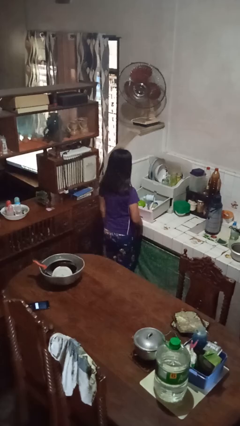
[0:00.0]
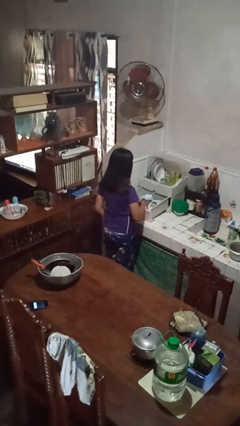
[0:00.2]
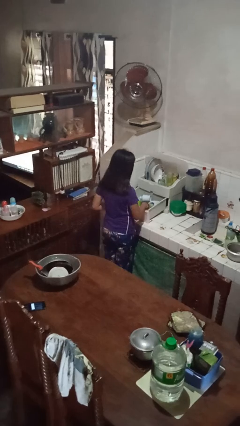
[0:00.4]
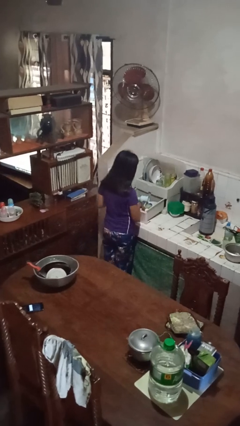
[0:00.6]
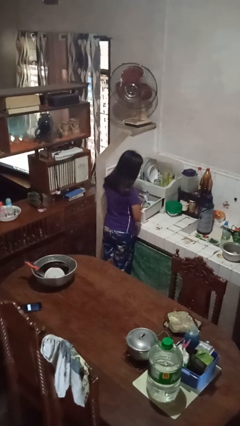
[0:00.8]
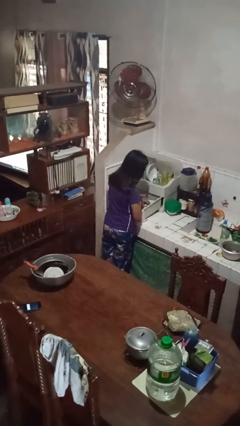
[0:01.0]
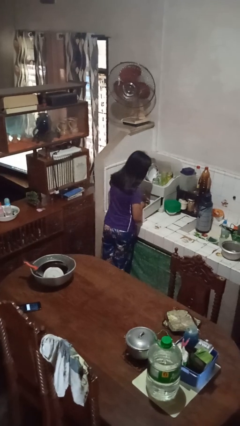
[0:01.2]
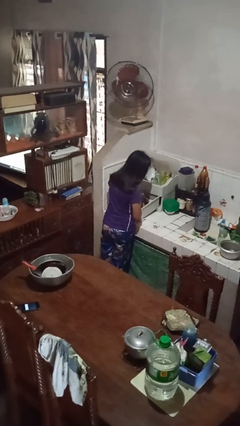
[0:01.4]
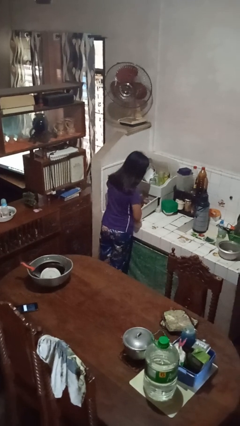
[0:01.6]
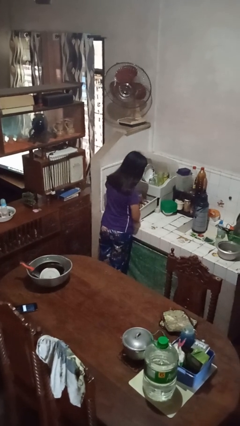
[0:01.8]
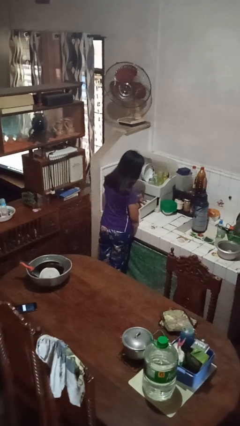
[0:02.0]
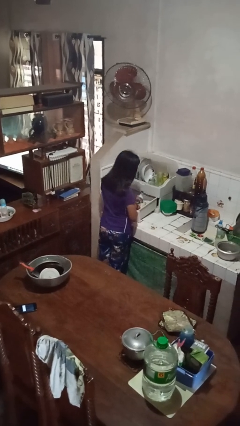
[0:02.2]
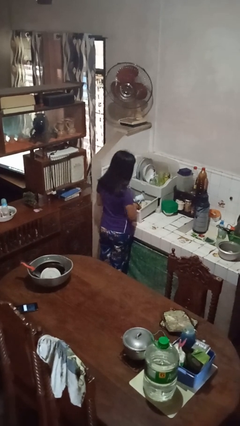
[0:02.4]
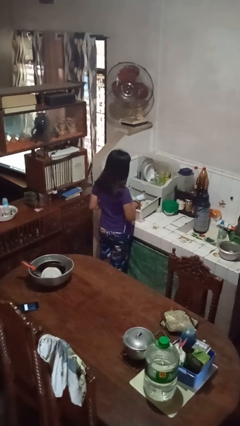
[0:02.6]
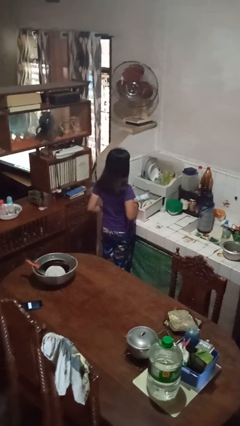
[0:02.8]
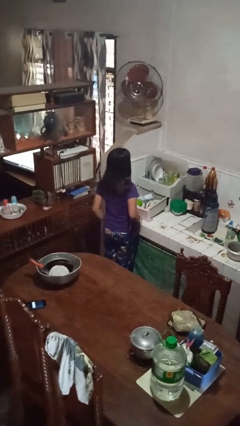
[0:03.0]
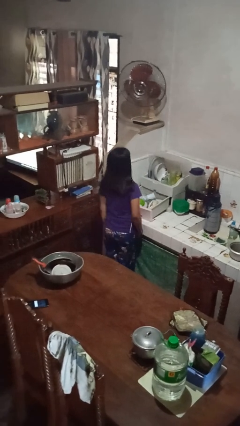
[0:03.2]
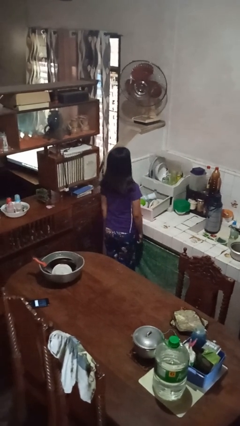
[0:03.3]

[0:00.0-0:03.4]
person searches in kitchen drawer

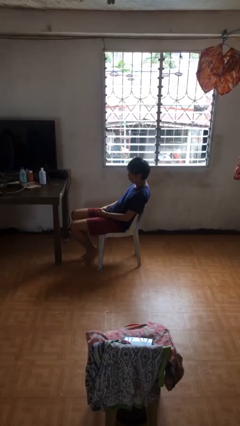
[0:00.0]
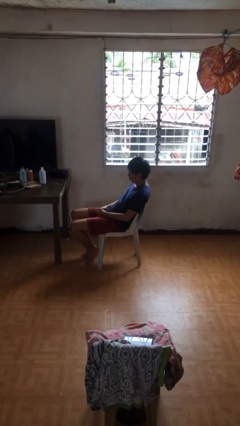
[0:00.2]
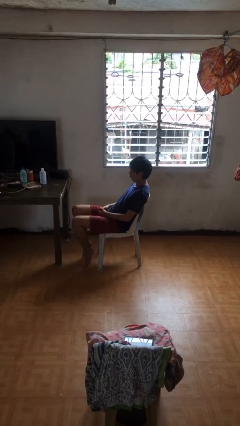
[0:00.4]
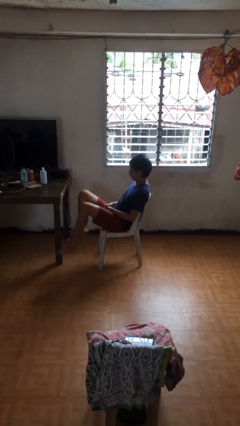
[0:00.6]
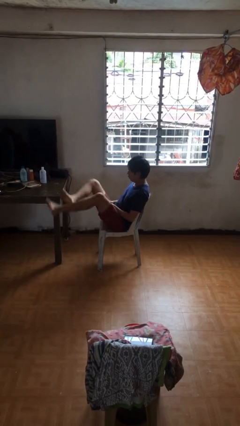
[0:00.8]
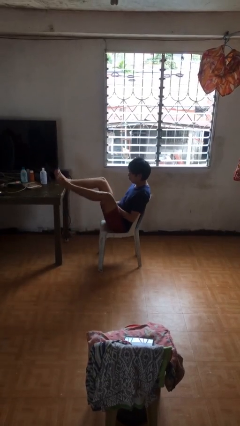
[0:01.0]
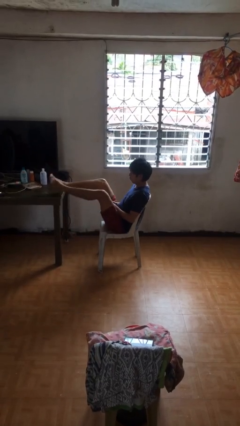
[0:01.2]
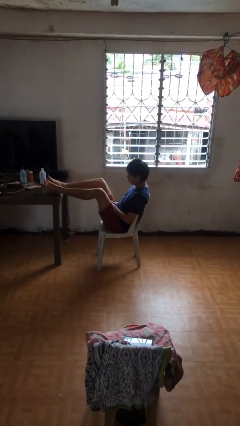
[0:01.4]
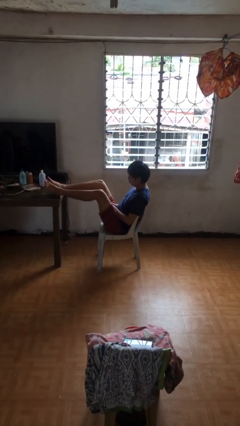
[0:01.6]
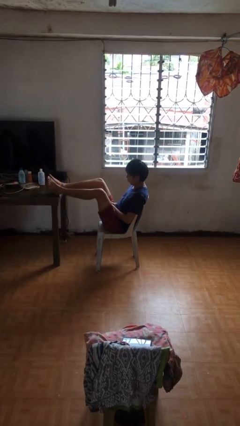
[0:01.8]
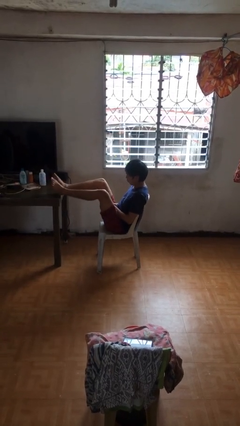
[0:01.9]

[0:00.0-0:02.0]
person puts feet up

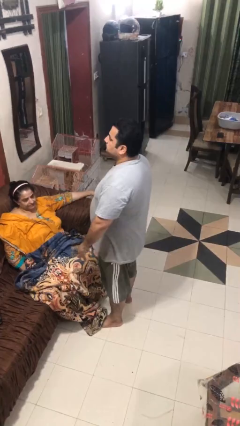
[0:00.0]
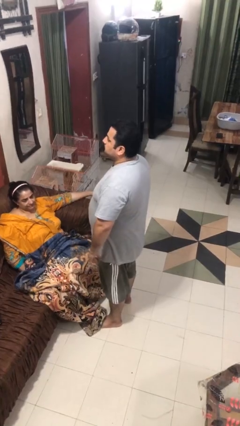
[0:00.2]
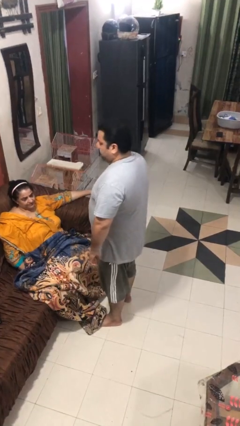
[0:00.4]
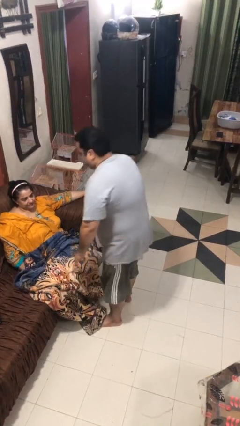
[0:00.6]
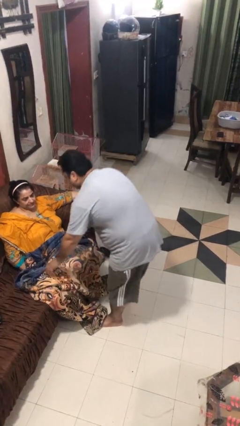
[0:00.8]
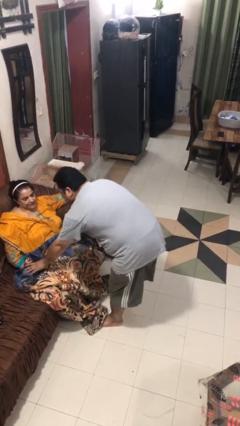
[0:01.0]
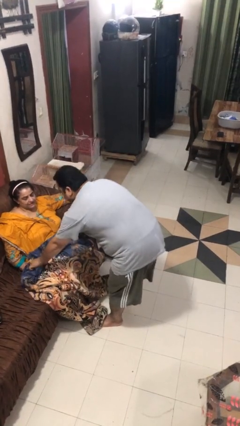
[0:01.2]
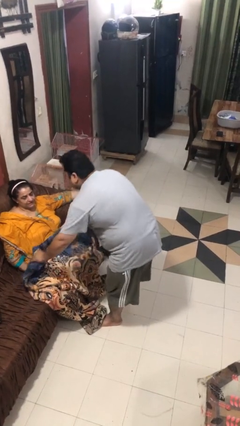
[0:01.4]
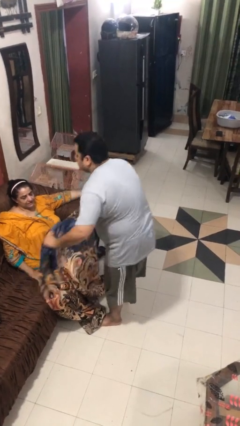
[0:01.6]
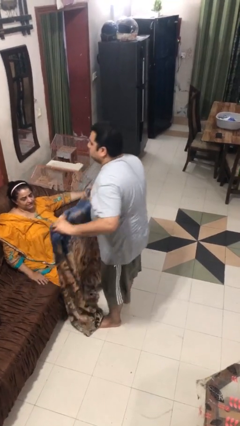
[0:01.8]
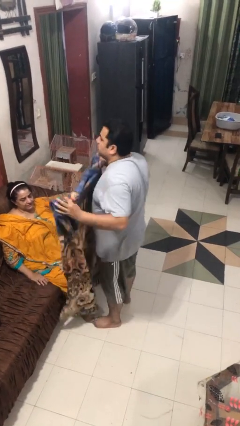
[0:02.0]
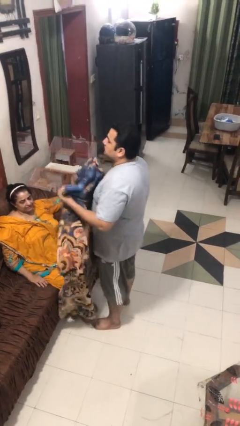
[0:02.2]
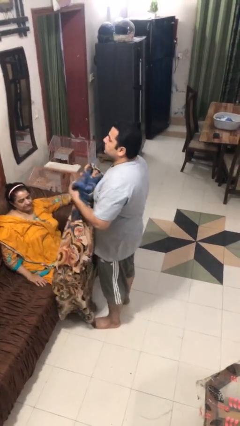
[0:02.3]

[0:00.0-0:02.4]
person uncovers friend with blanket

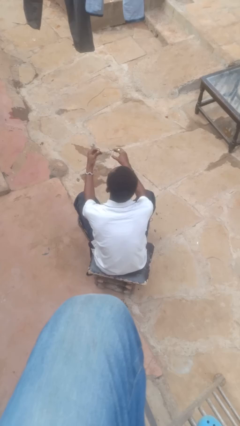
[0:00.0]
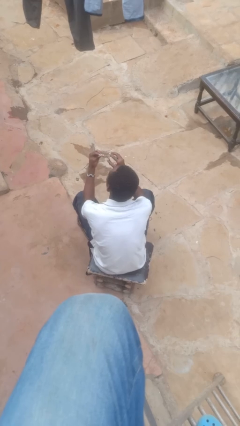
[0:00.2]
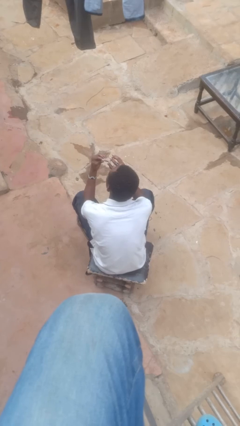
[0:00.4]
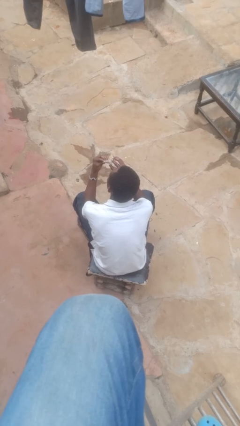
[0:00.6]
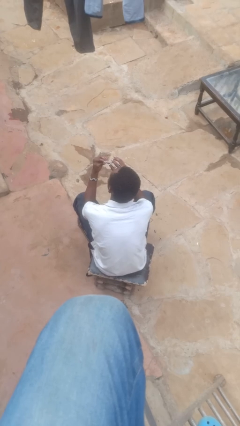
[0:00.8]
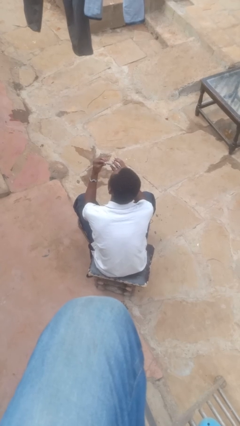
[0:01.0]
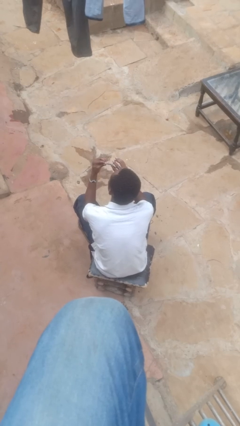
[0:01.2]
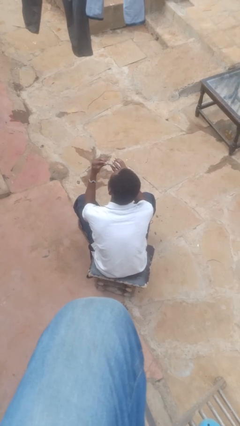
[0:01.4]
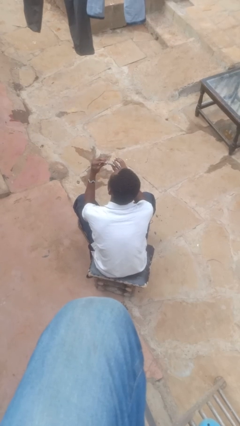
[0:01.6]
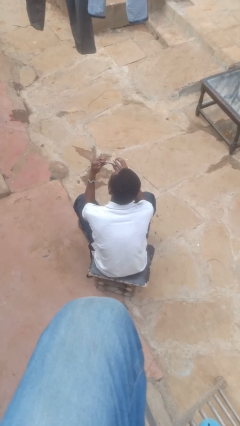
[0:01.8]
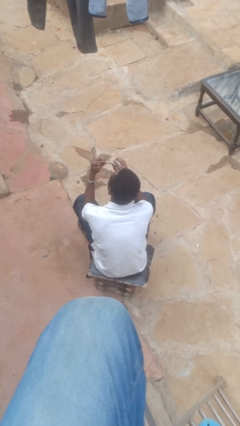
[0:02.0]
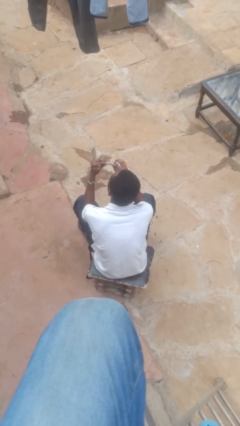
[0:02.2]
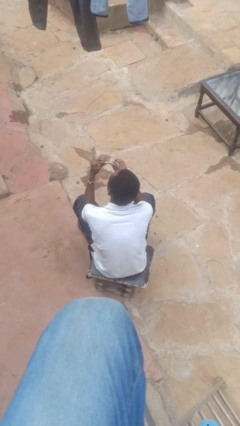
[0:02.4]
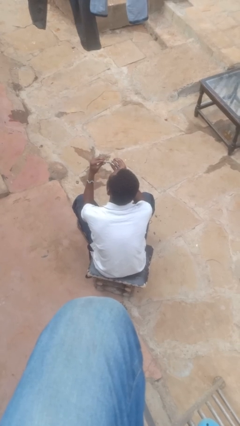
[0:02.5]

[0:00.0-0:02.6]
person clips fingernails

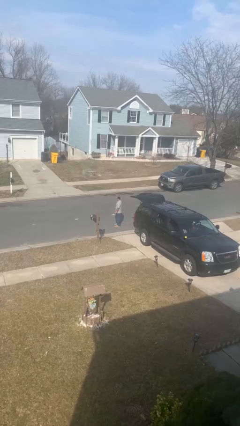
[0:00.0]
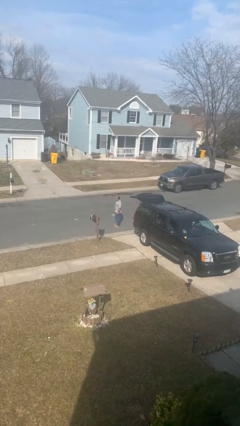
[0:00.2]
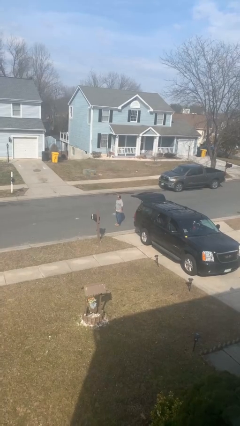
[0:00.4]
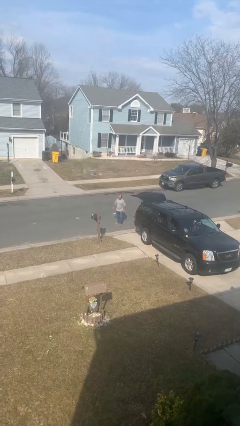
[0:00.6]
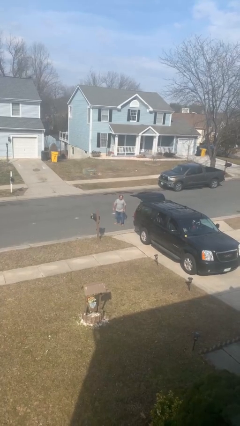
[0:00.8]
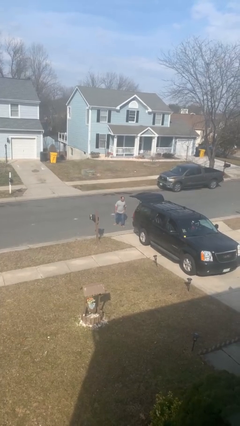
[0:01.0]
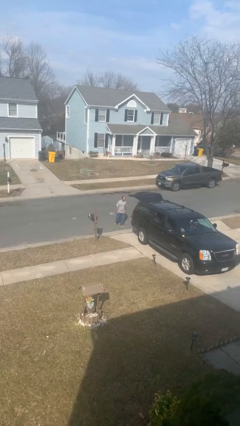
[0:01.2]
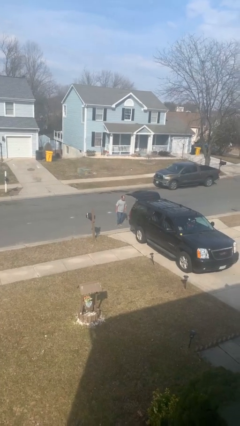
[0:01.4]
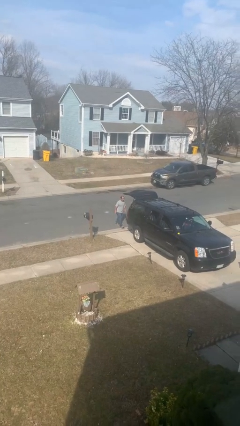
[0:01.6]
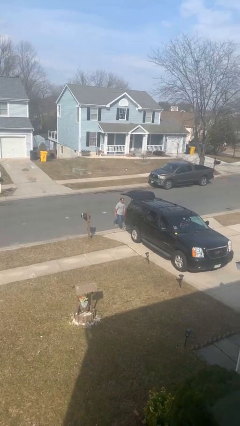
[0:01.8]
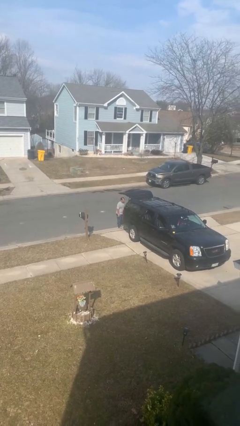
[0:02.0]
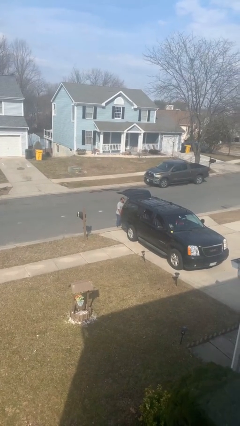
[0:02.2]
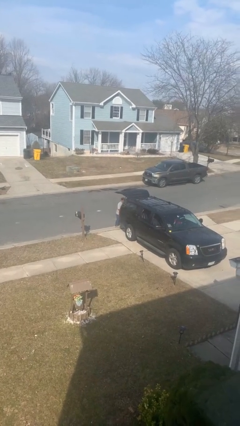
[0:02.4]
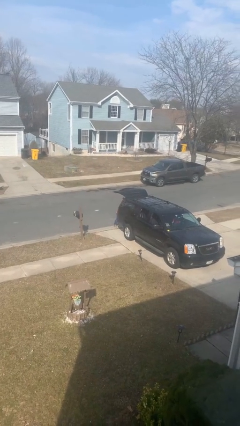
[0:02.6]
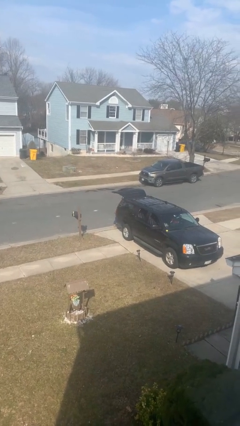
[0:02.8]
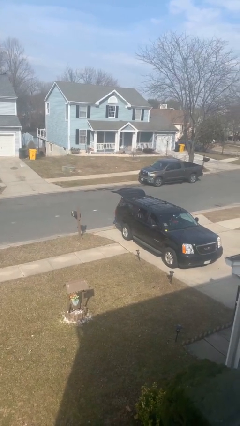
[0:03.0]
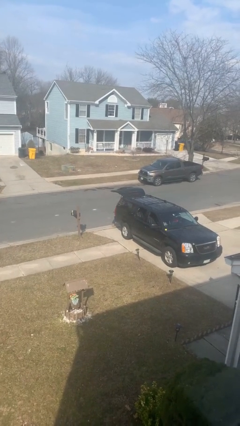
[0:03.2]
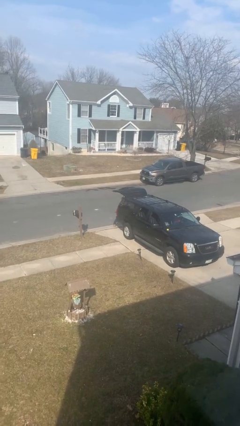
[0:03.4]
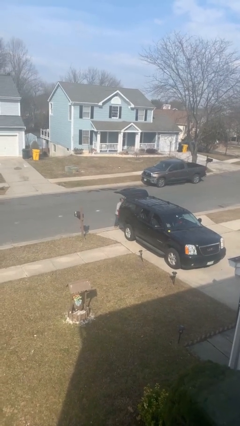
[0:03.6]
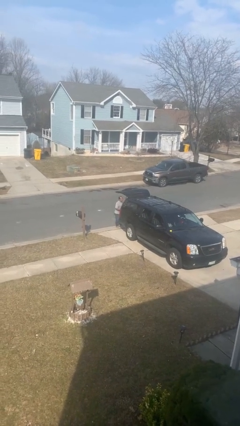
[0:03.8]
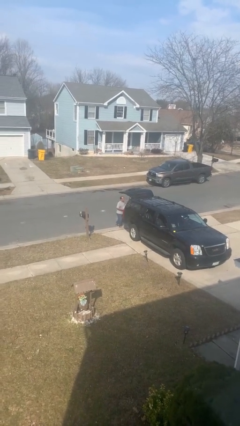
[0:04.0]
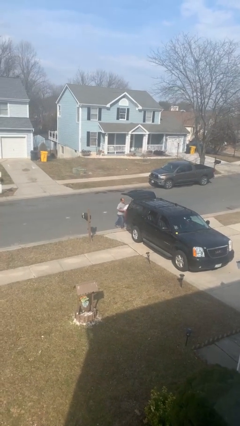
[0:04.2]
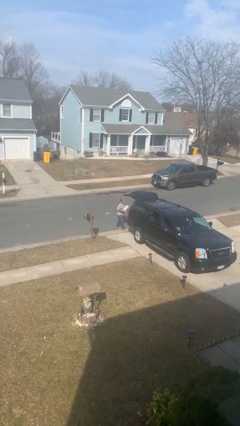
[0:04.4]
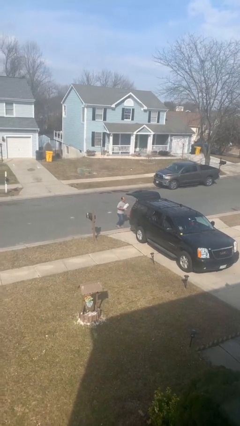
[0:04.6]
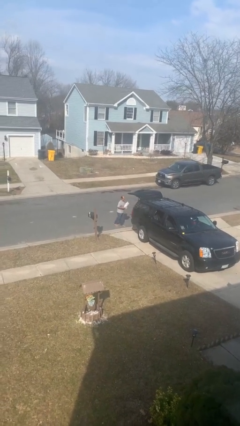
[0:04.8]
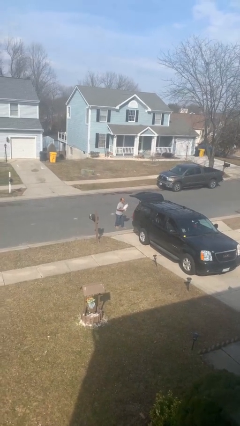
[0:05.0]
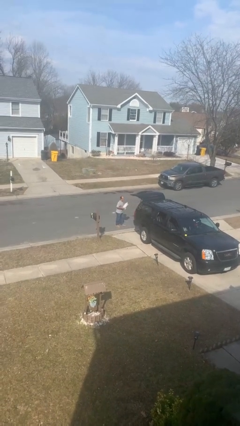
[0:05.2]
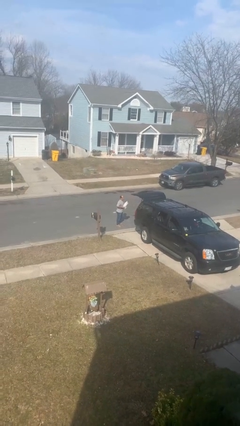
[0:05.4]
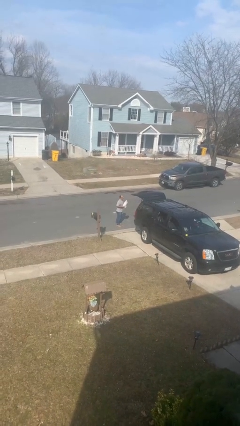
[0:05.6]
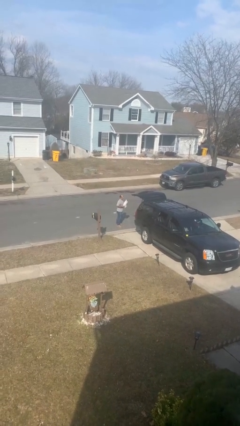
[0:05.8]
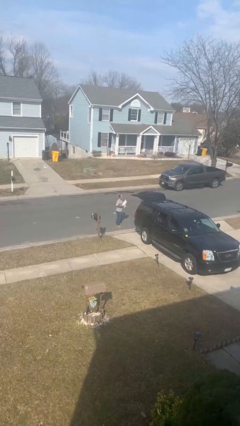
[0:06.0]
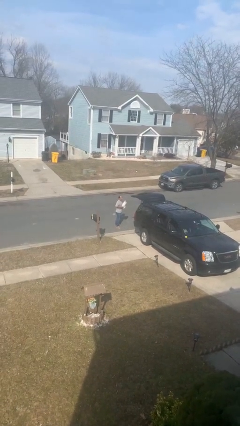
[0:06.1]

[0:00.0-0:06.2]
person unloads car

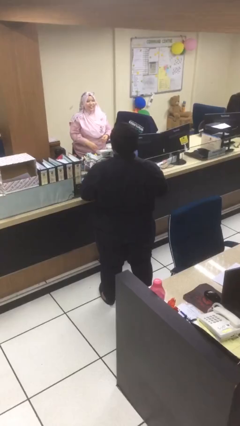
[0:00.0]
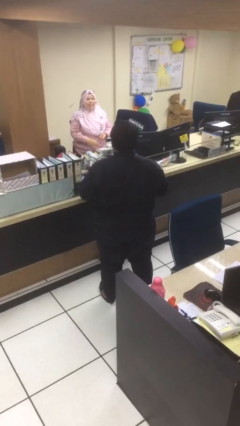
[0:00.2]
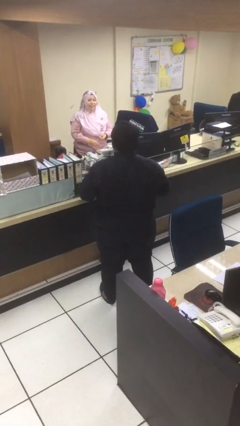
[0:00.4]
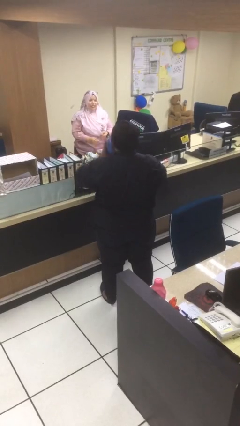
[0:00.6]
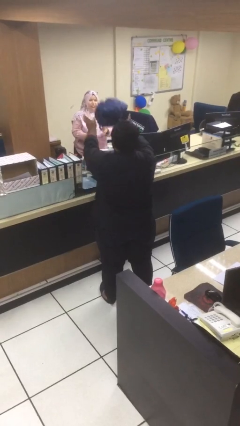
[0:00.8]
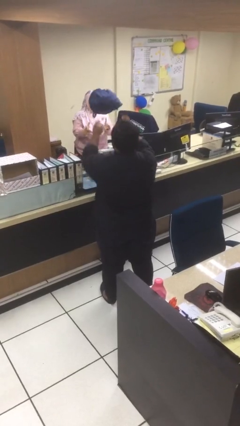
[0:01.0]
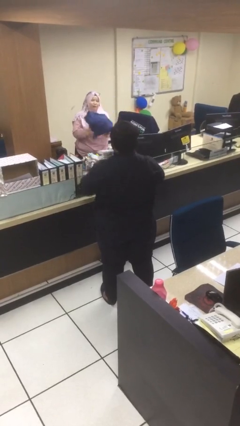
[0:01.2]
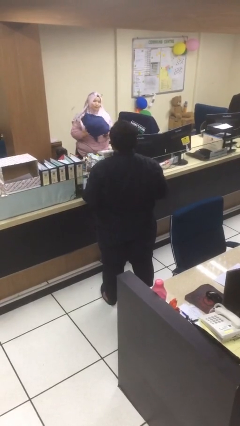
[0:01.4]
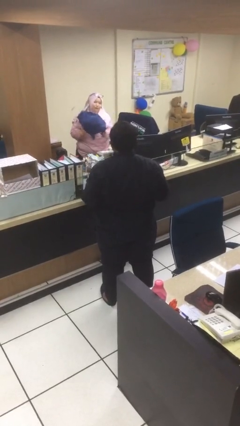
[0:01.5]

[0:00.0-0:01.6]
person throws object to person
